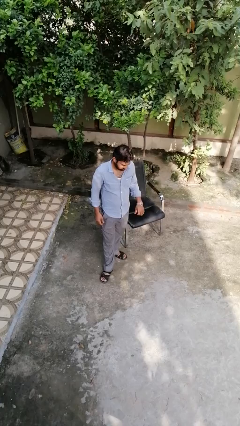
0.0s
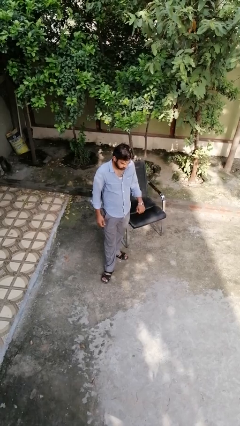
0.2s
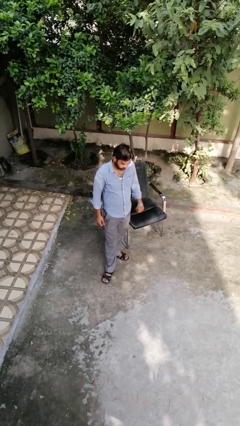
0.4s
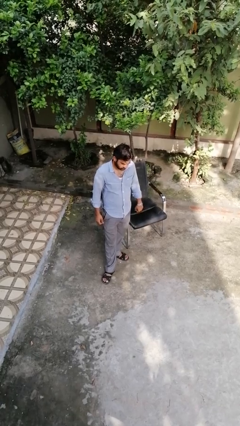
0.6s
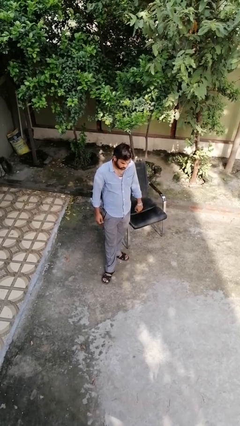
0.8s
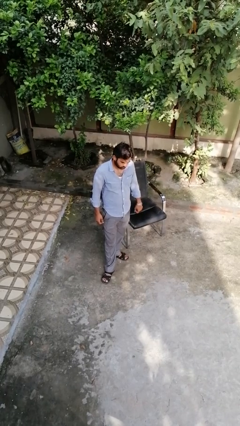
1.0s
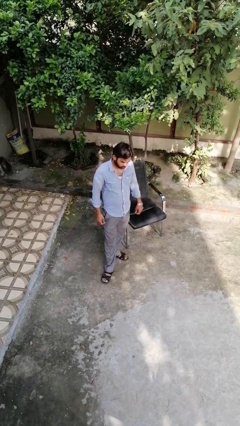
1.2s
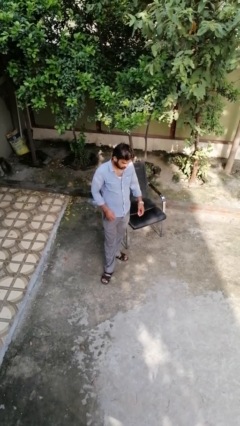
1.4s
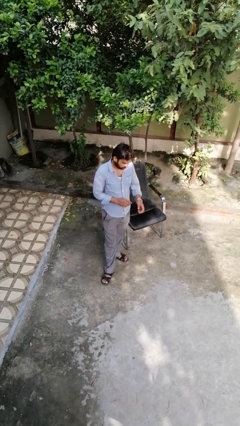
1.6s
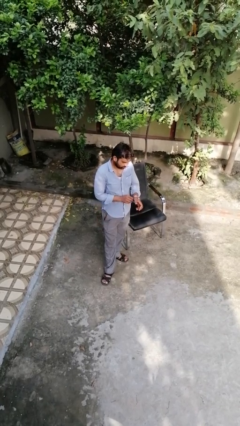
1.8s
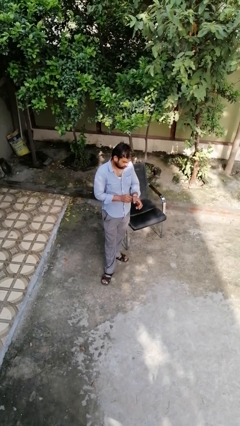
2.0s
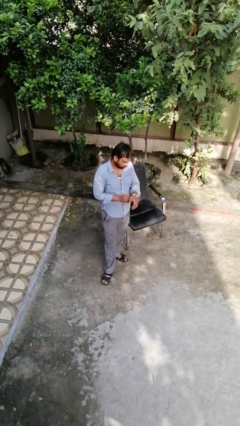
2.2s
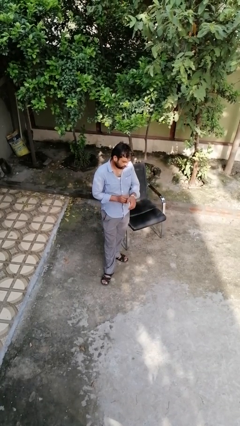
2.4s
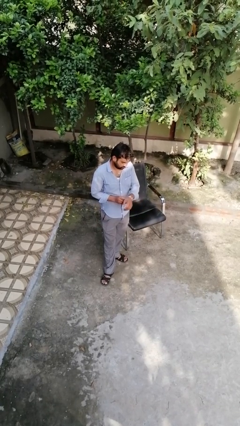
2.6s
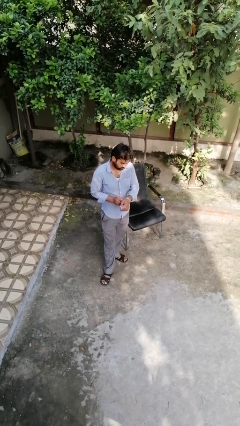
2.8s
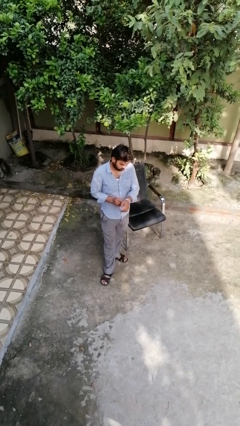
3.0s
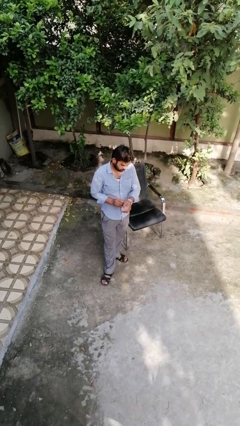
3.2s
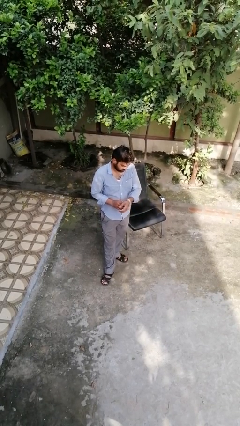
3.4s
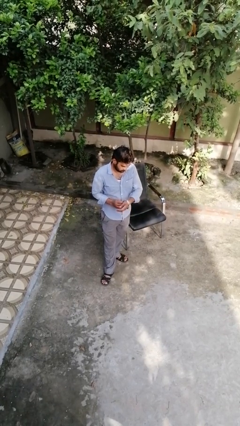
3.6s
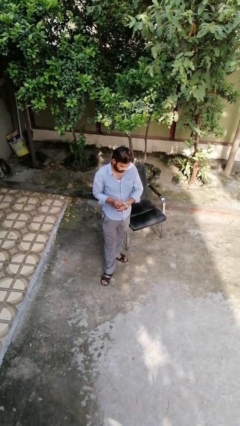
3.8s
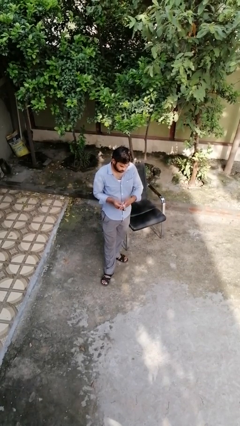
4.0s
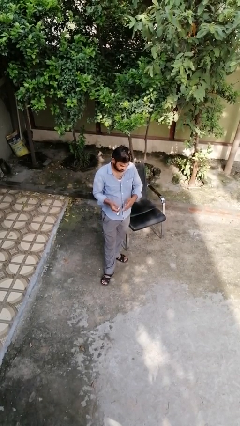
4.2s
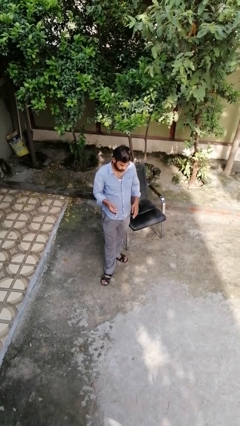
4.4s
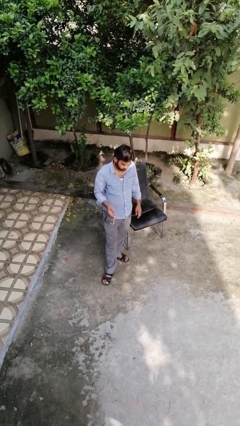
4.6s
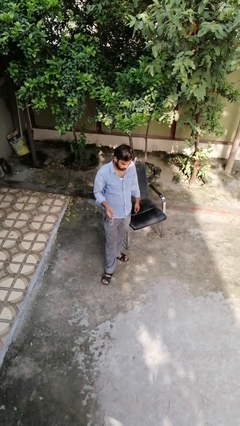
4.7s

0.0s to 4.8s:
person takes off wristwatch

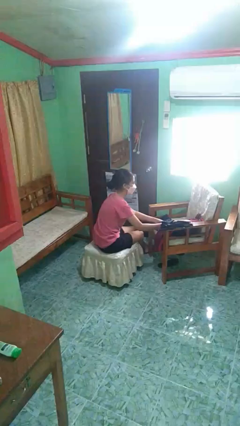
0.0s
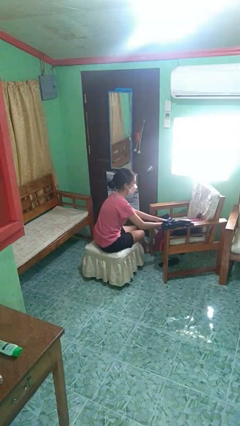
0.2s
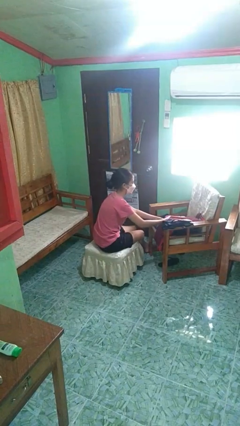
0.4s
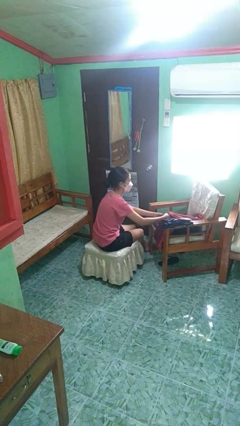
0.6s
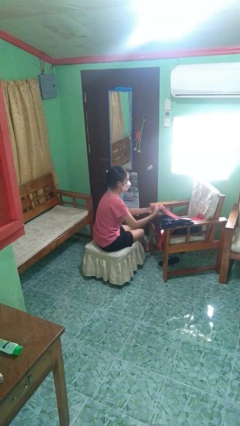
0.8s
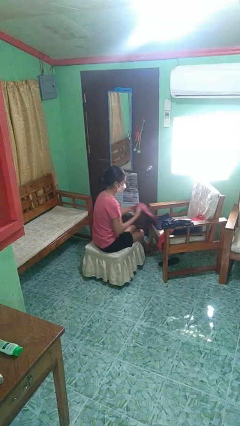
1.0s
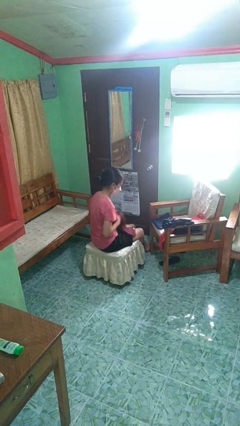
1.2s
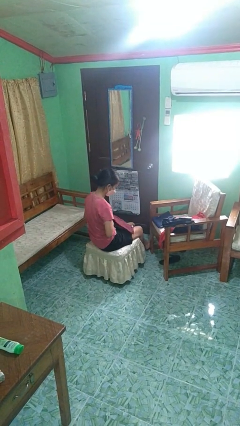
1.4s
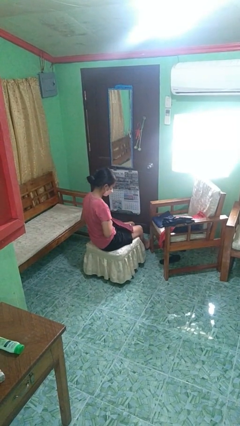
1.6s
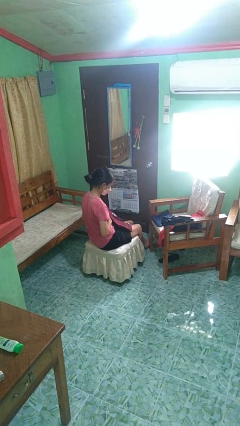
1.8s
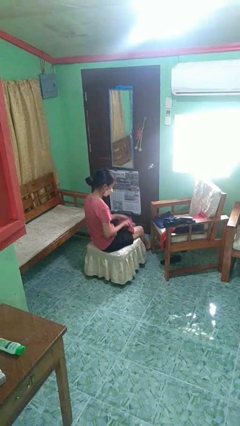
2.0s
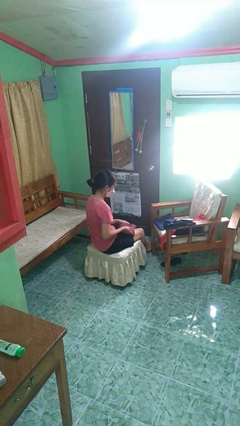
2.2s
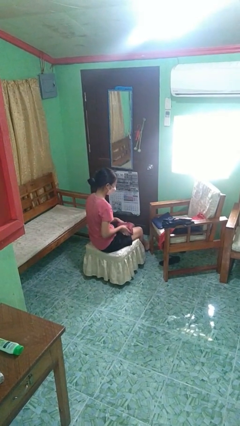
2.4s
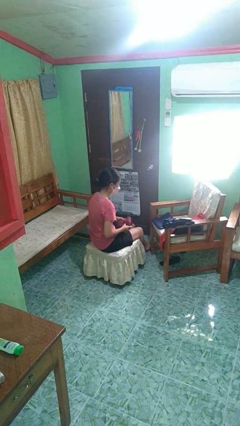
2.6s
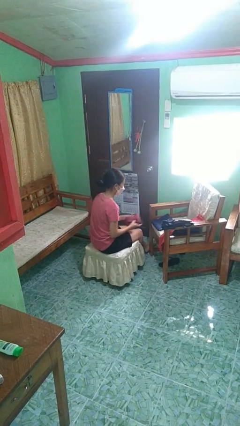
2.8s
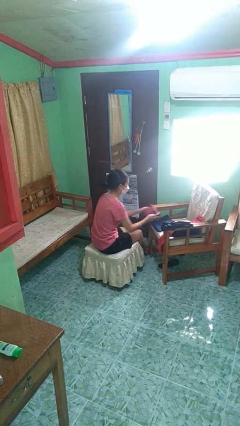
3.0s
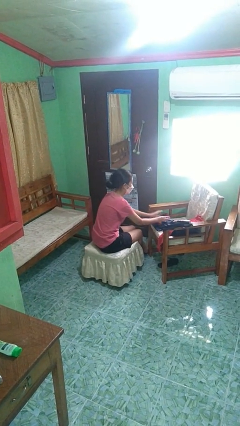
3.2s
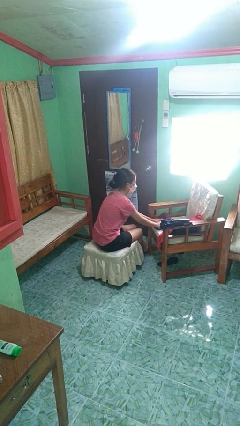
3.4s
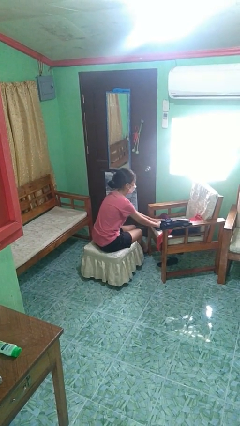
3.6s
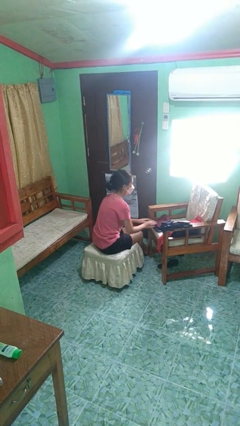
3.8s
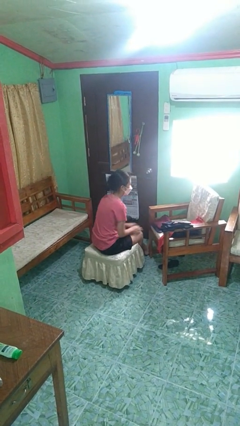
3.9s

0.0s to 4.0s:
person folds shirt

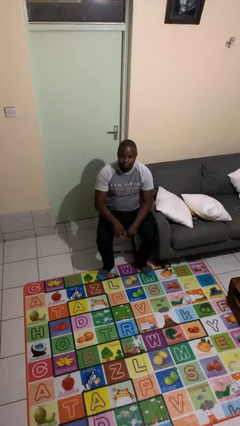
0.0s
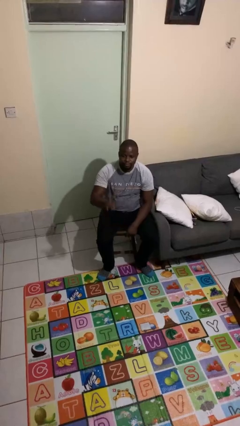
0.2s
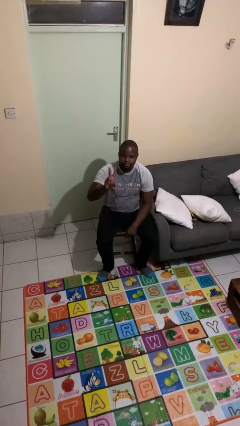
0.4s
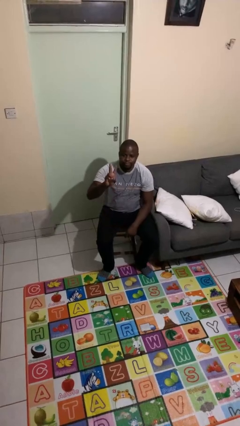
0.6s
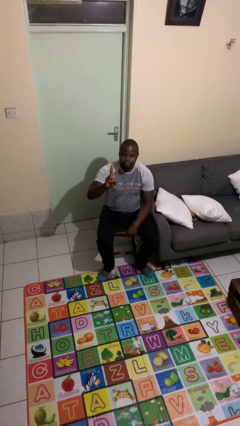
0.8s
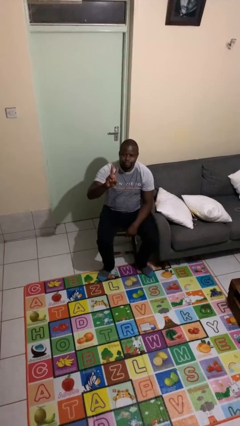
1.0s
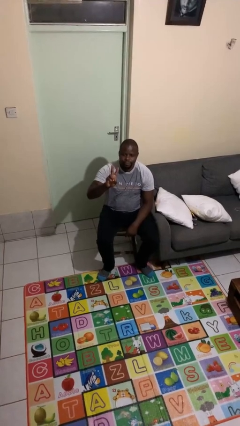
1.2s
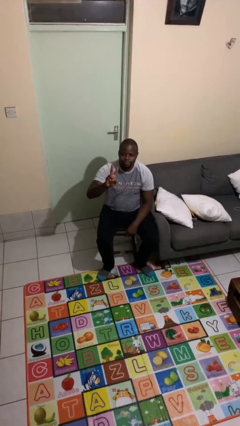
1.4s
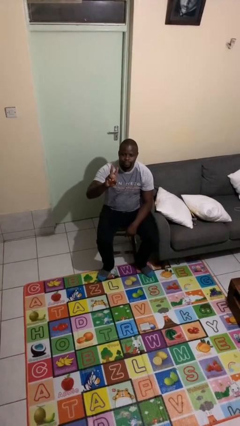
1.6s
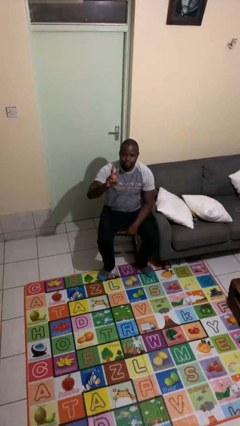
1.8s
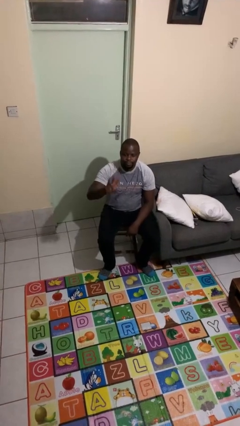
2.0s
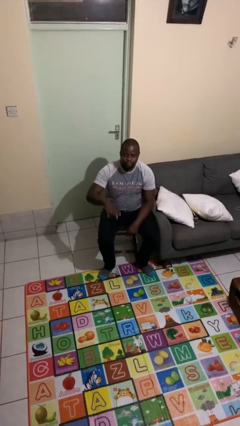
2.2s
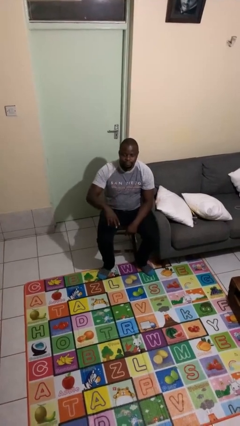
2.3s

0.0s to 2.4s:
person gestures peace

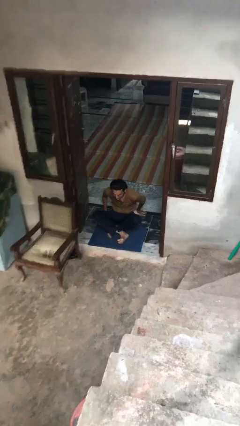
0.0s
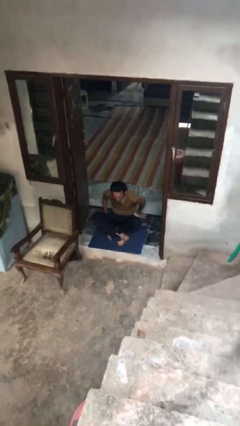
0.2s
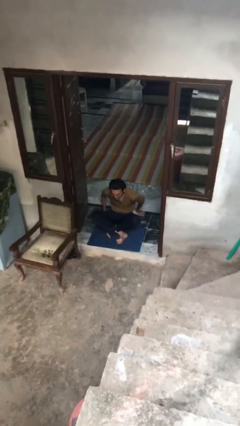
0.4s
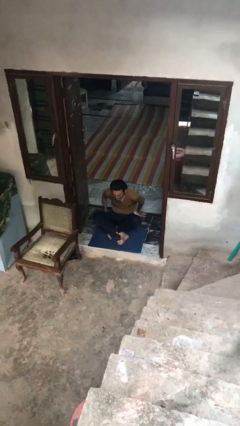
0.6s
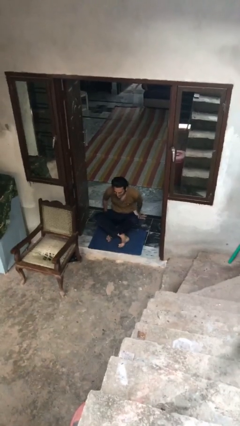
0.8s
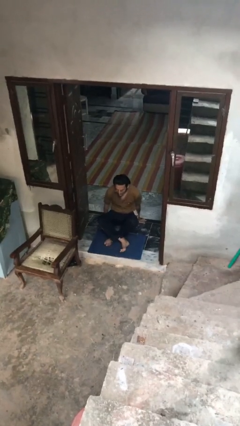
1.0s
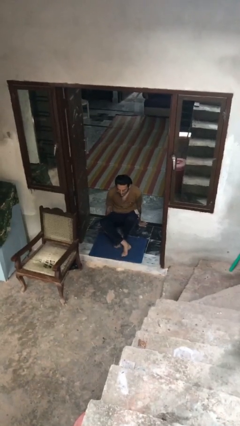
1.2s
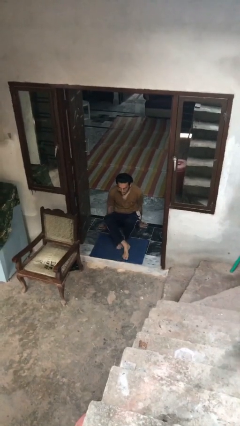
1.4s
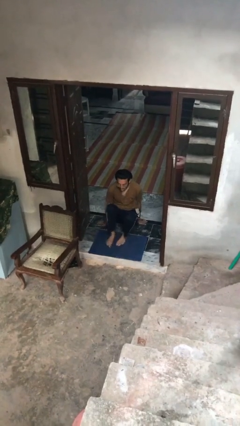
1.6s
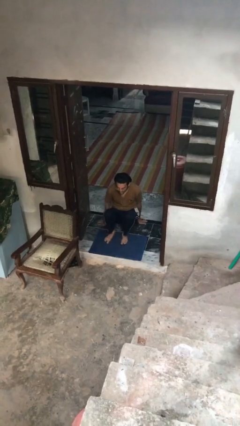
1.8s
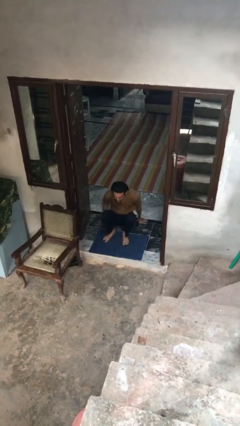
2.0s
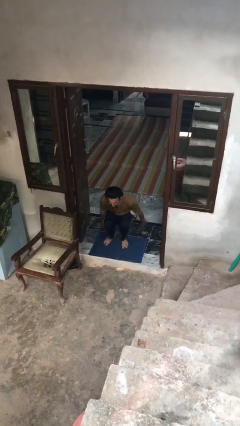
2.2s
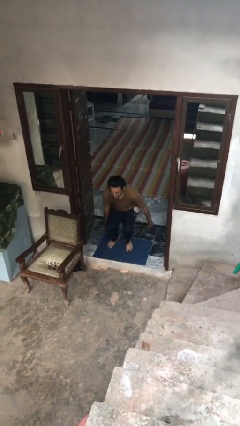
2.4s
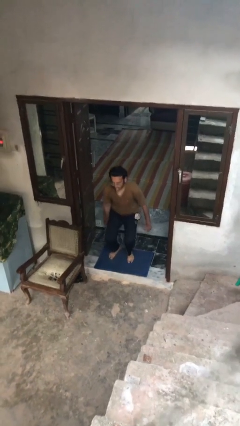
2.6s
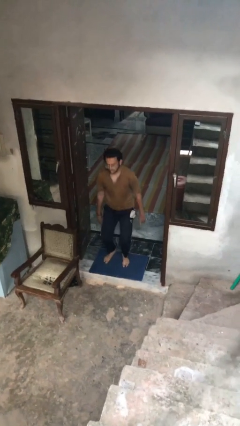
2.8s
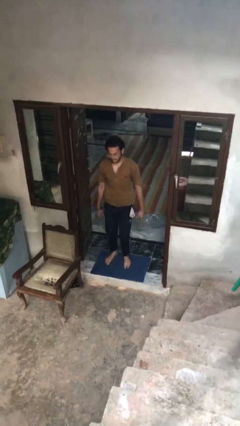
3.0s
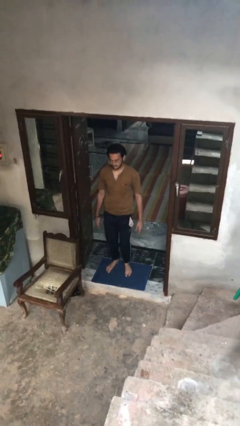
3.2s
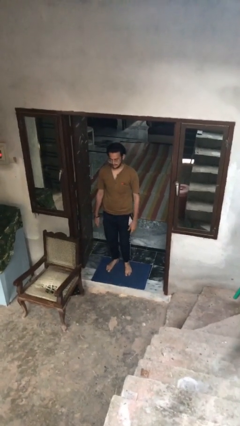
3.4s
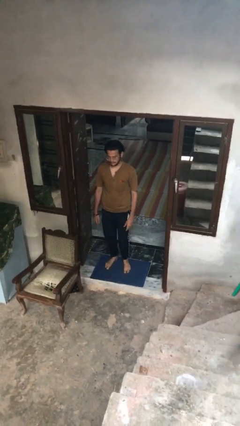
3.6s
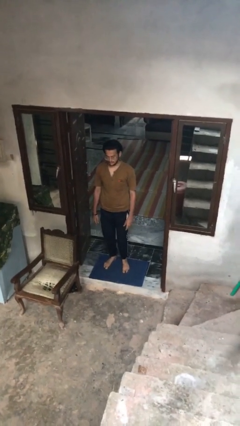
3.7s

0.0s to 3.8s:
person stands up from floor

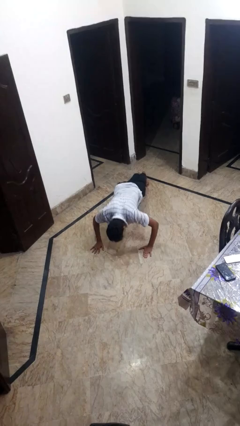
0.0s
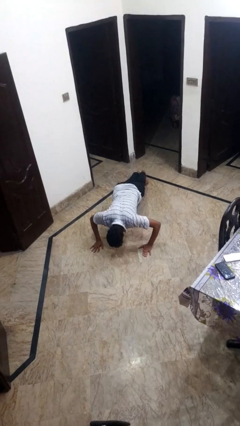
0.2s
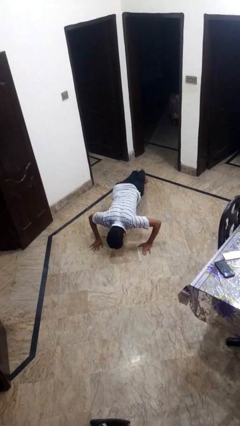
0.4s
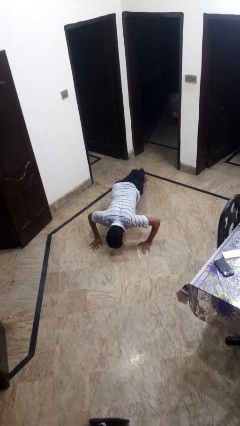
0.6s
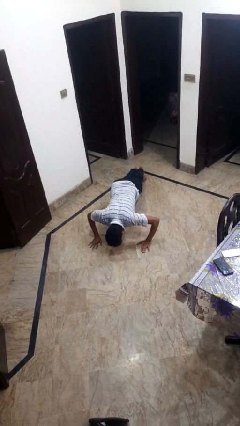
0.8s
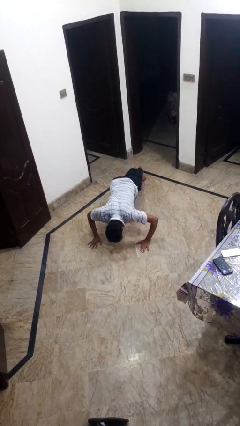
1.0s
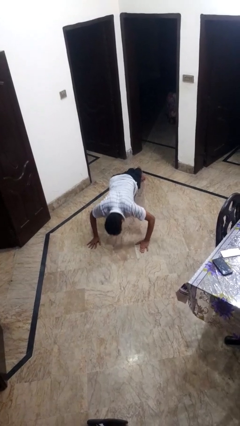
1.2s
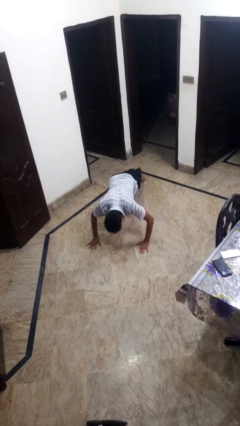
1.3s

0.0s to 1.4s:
person exercises with pushup

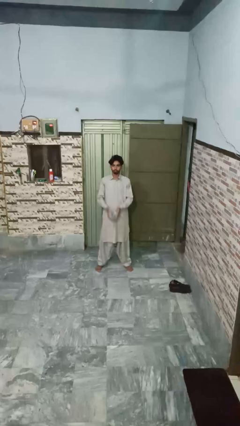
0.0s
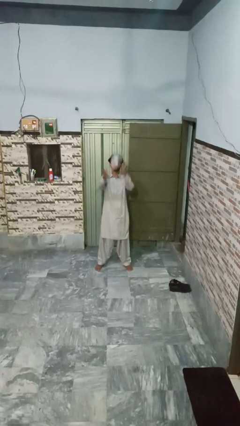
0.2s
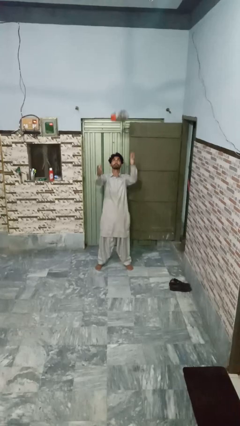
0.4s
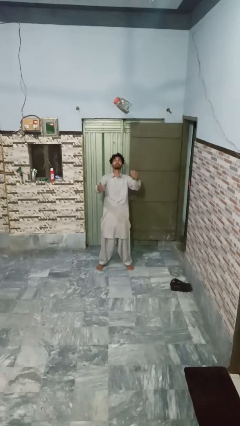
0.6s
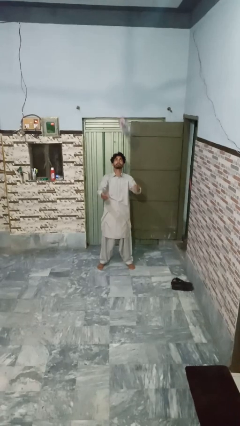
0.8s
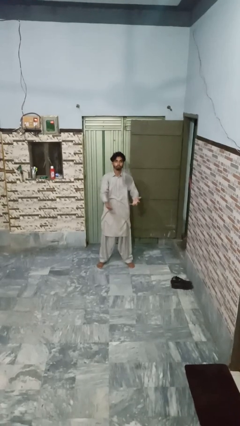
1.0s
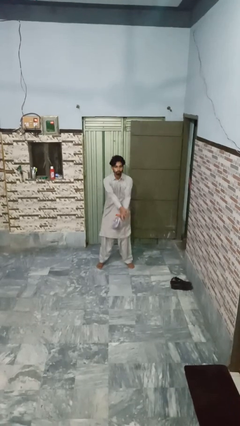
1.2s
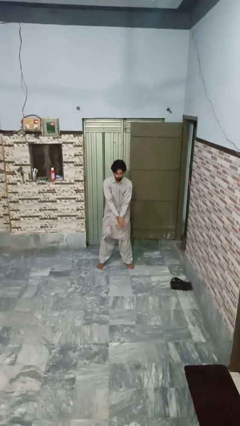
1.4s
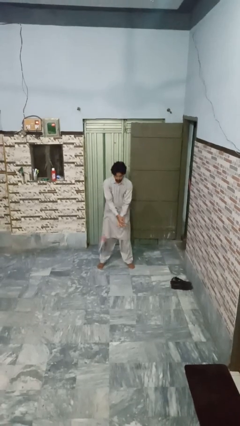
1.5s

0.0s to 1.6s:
person drops object
